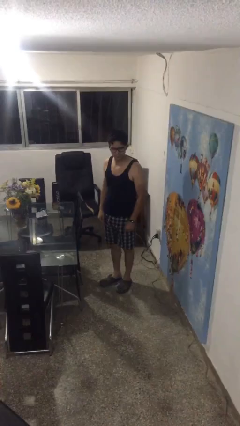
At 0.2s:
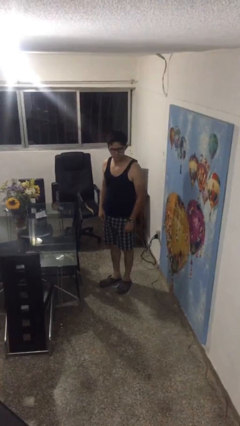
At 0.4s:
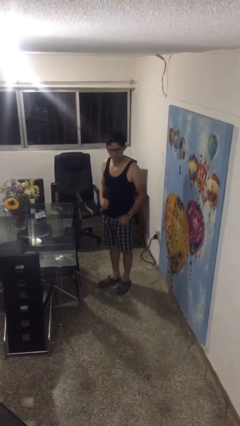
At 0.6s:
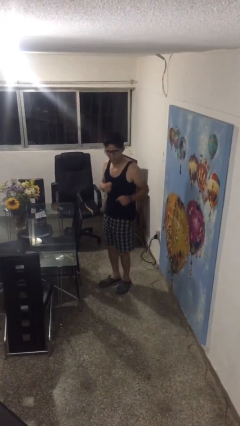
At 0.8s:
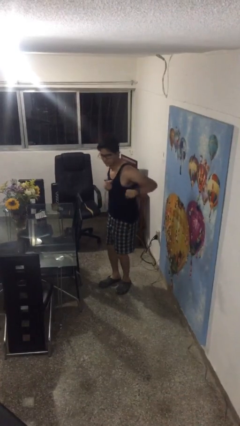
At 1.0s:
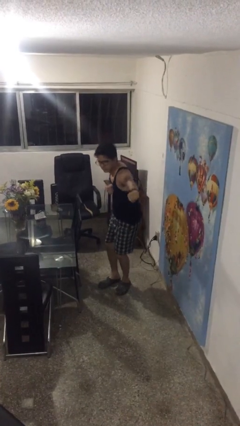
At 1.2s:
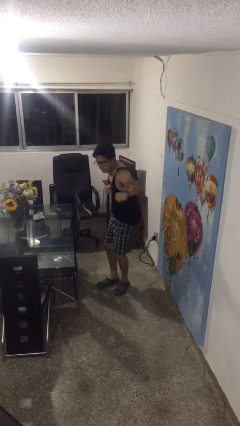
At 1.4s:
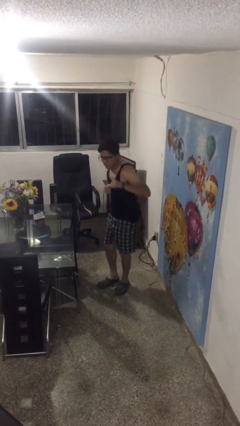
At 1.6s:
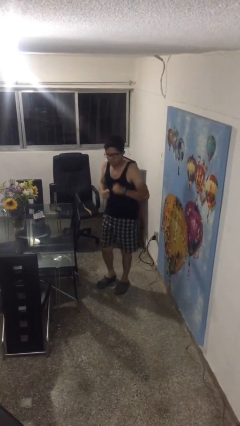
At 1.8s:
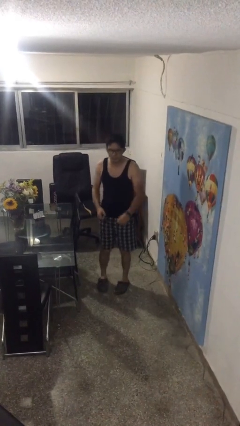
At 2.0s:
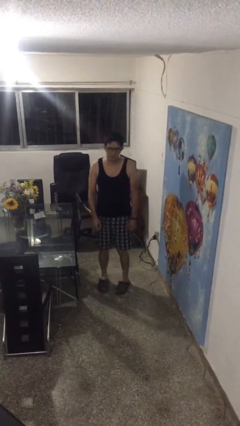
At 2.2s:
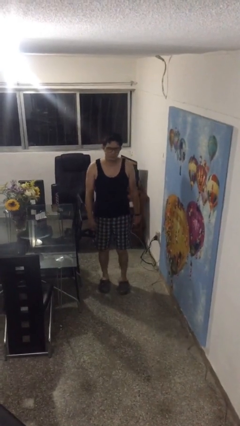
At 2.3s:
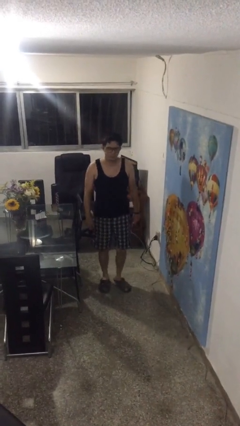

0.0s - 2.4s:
person karate chop

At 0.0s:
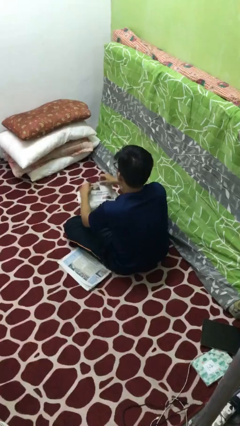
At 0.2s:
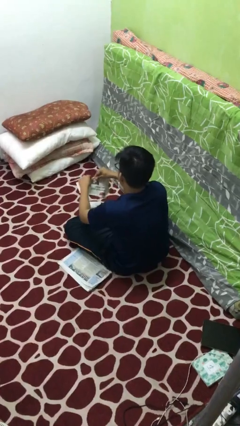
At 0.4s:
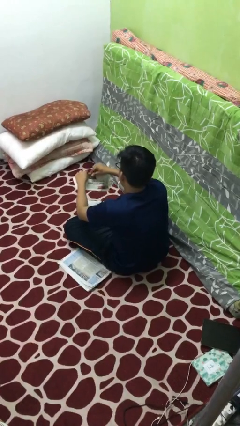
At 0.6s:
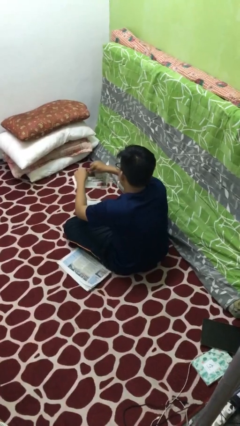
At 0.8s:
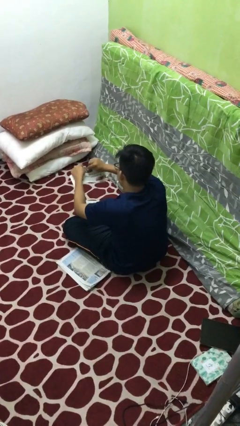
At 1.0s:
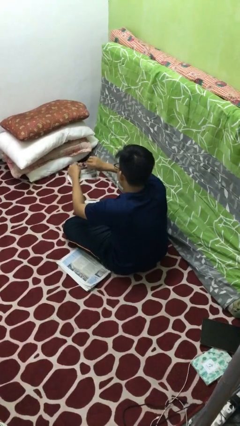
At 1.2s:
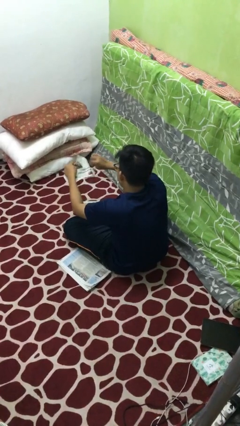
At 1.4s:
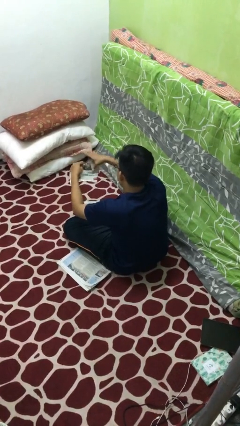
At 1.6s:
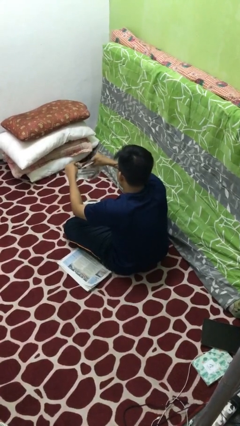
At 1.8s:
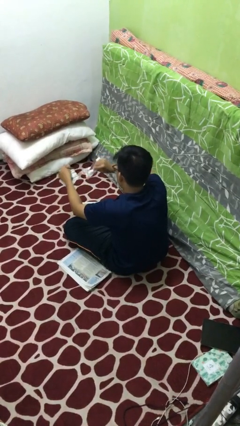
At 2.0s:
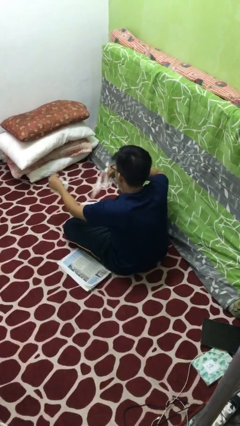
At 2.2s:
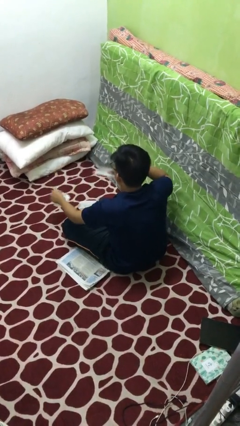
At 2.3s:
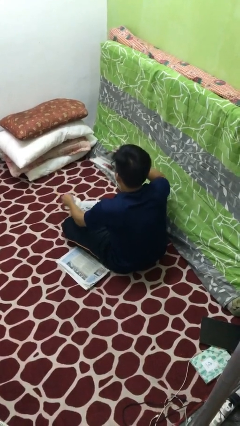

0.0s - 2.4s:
person tears paper

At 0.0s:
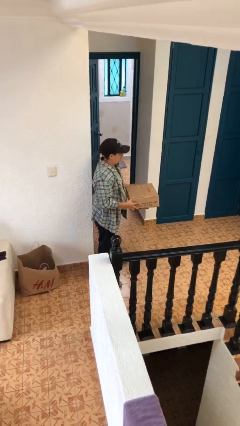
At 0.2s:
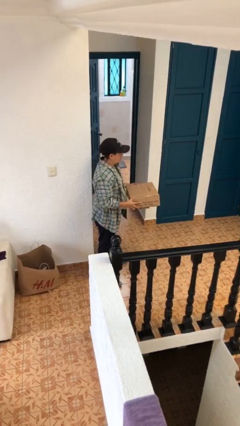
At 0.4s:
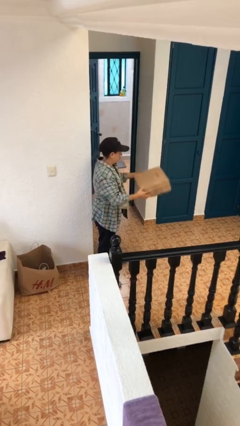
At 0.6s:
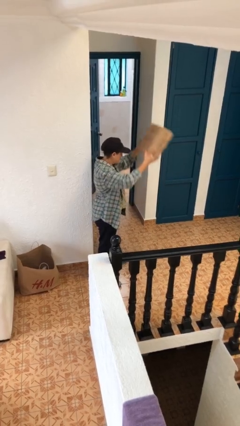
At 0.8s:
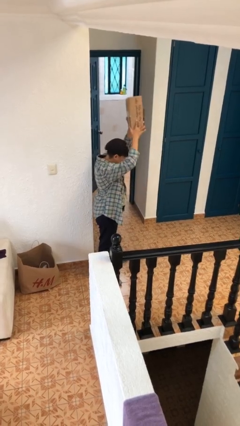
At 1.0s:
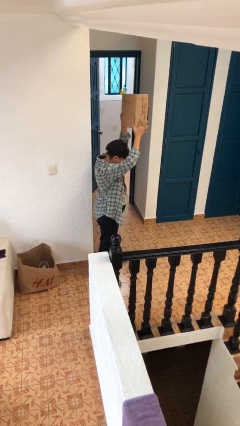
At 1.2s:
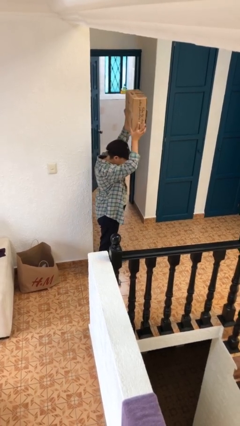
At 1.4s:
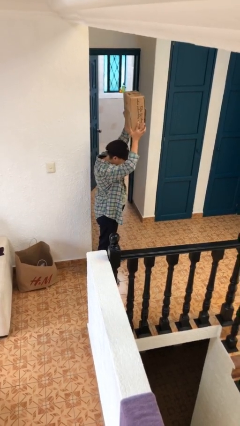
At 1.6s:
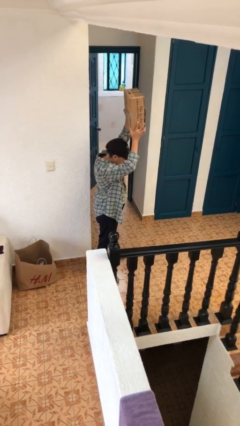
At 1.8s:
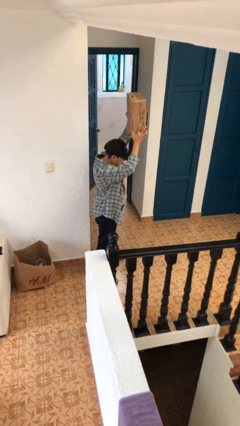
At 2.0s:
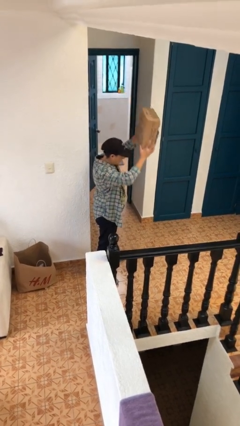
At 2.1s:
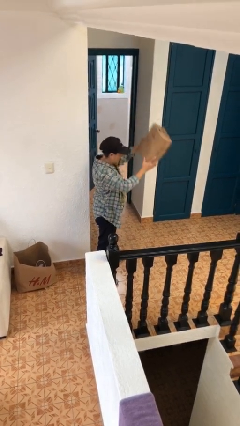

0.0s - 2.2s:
person holds object above head

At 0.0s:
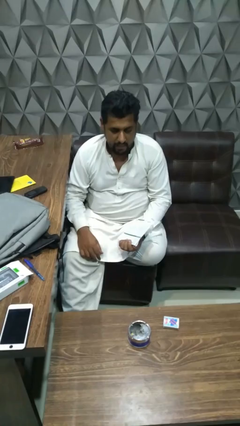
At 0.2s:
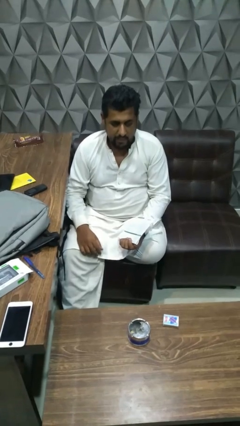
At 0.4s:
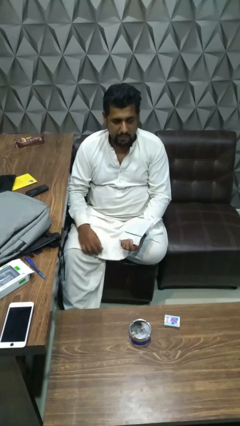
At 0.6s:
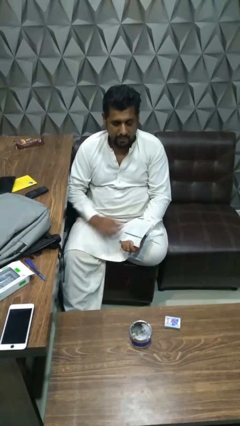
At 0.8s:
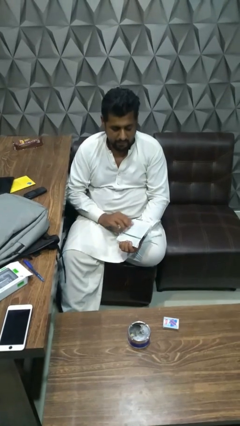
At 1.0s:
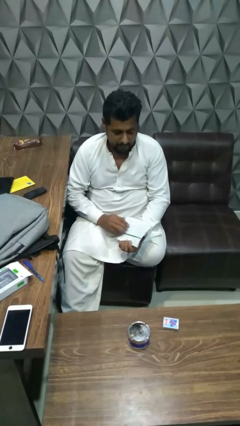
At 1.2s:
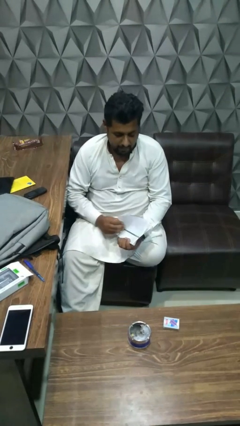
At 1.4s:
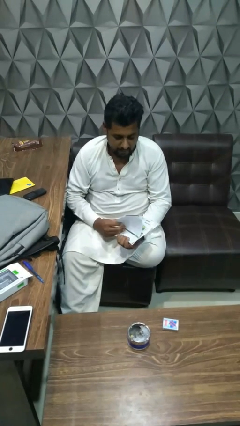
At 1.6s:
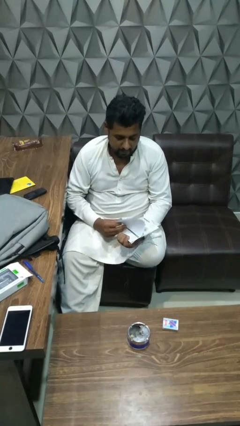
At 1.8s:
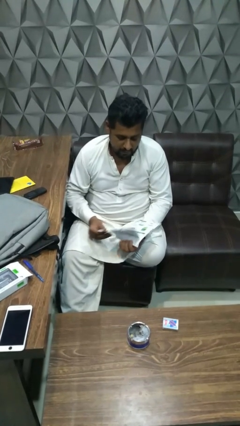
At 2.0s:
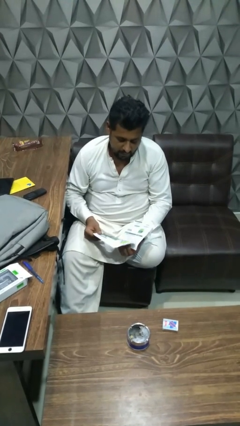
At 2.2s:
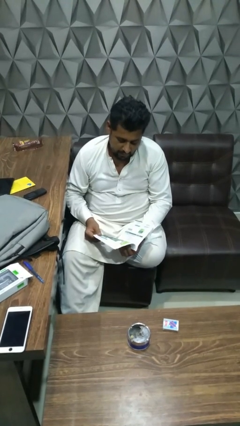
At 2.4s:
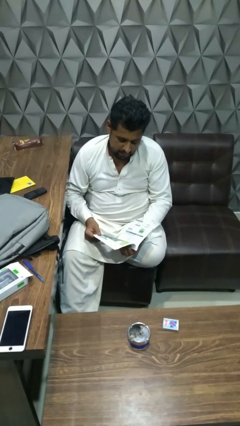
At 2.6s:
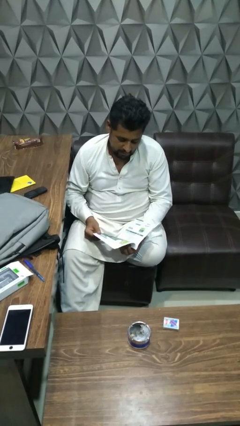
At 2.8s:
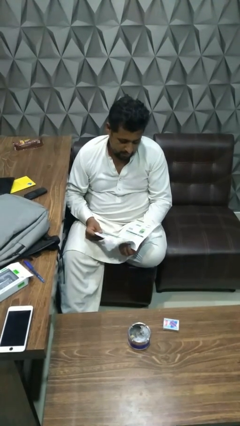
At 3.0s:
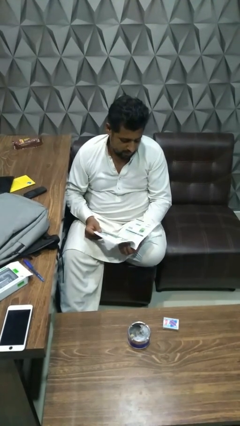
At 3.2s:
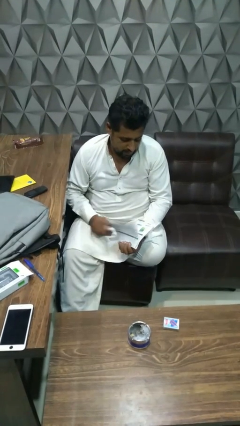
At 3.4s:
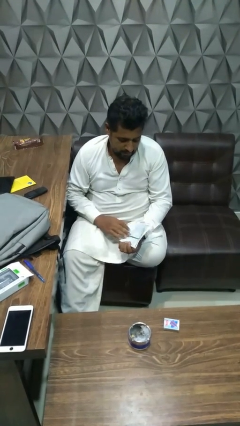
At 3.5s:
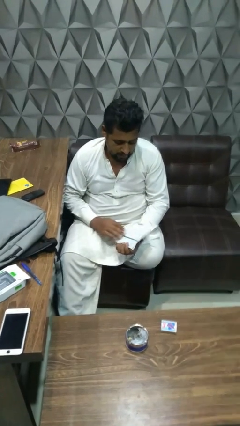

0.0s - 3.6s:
person reads book

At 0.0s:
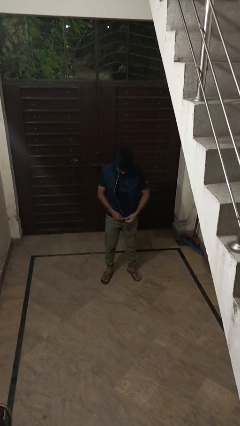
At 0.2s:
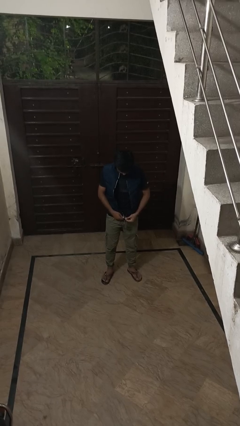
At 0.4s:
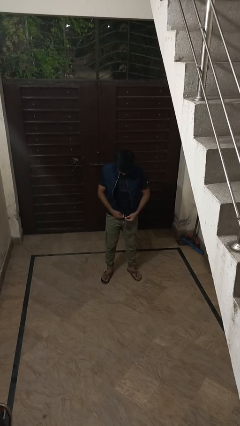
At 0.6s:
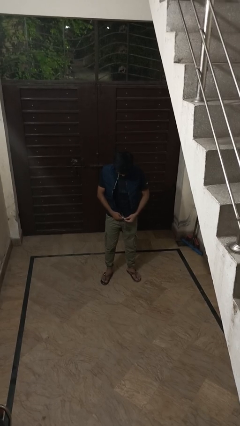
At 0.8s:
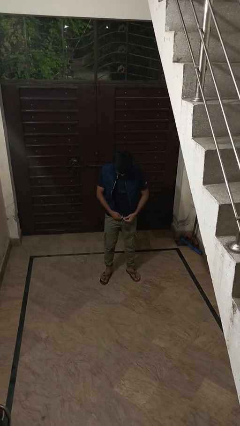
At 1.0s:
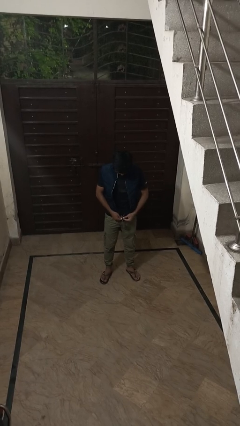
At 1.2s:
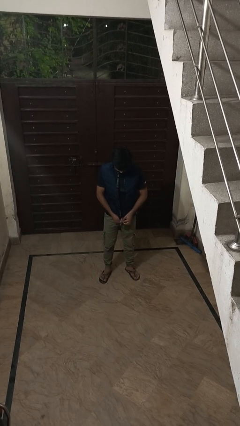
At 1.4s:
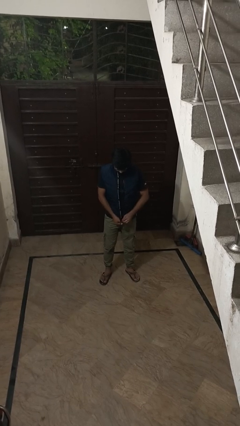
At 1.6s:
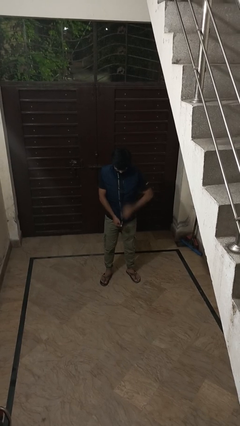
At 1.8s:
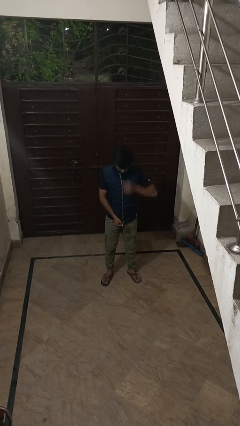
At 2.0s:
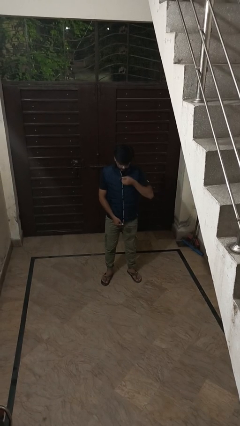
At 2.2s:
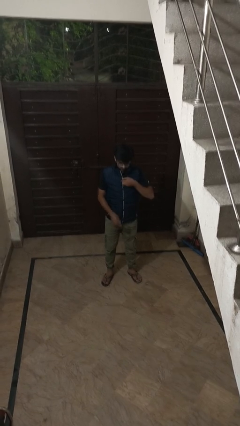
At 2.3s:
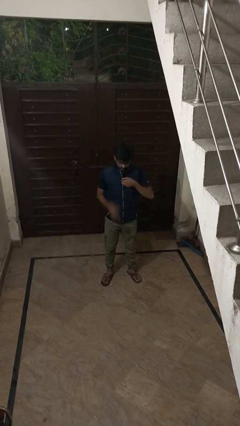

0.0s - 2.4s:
person zips up jacket

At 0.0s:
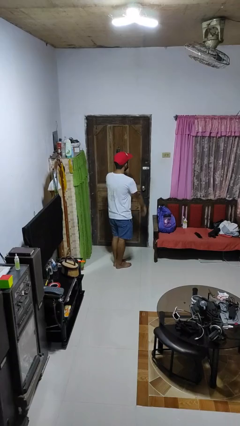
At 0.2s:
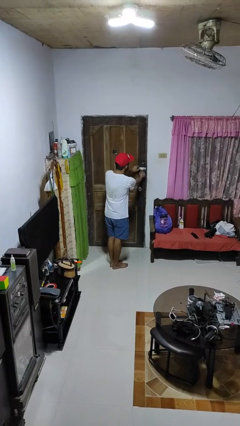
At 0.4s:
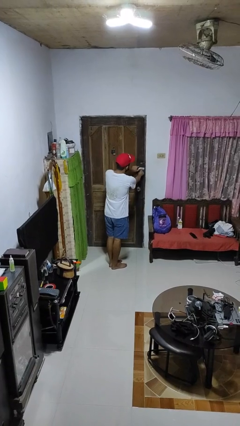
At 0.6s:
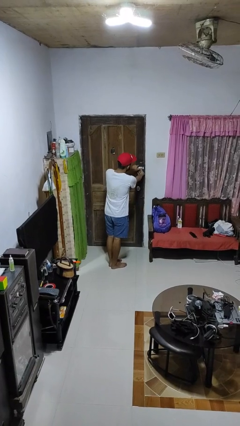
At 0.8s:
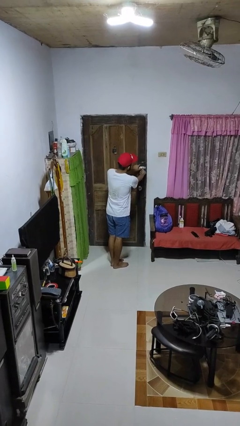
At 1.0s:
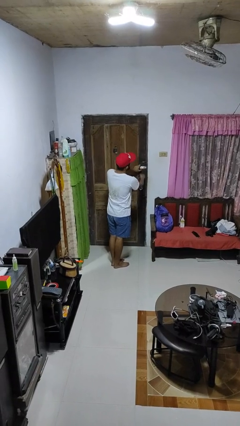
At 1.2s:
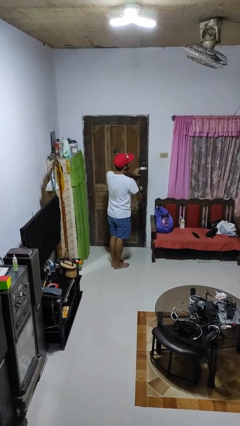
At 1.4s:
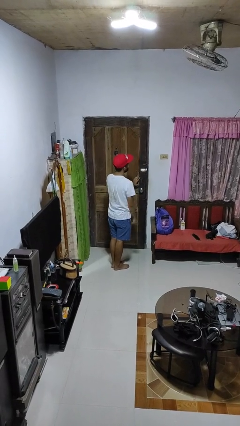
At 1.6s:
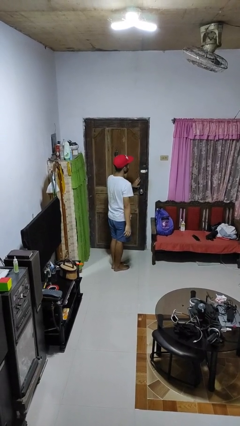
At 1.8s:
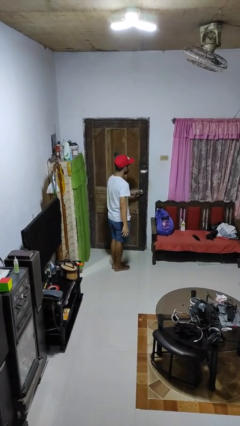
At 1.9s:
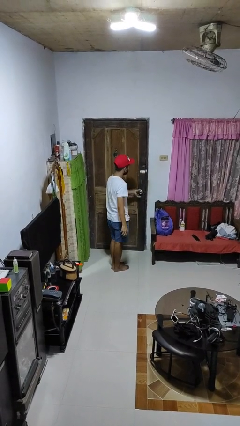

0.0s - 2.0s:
person unlocks door with keys

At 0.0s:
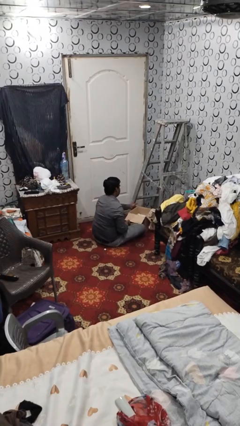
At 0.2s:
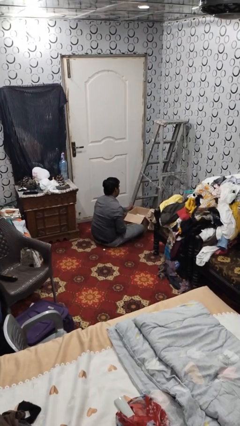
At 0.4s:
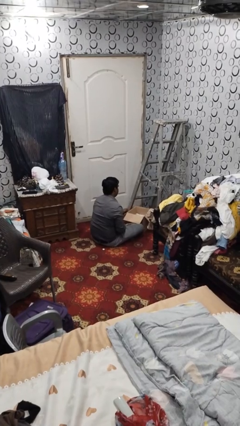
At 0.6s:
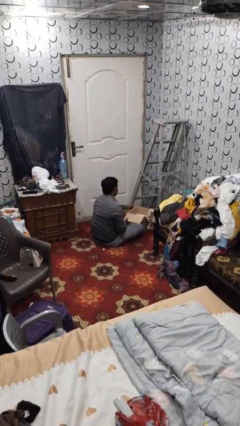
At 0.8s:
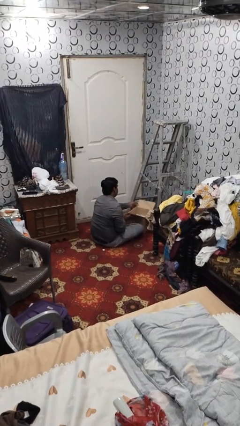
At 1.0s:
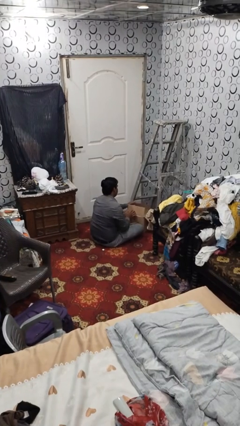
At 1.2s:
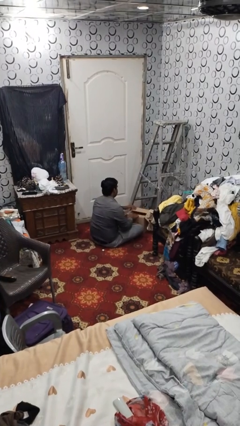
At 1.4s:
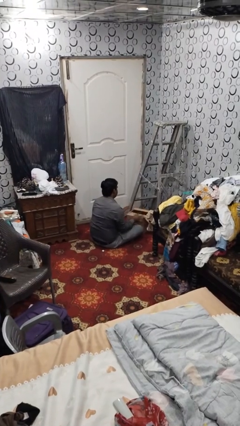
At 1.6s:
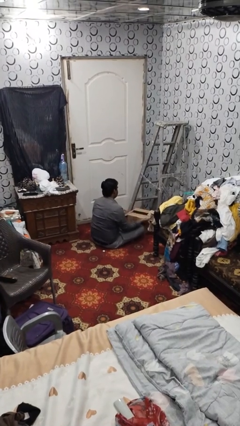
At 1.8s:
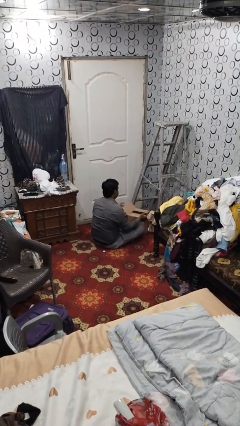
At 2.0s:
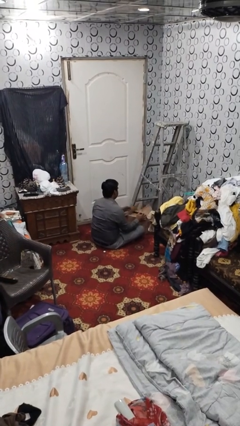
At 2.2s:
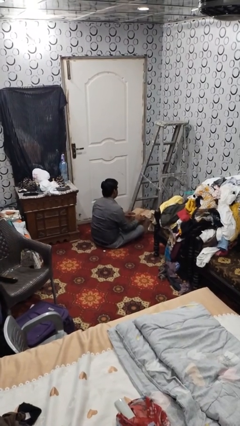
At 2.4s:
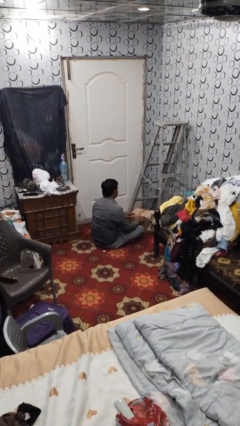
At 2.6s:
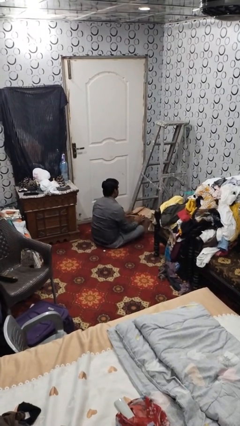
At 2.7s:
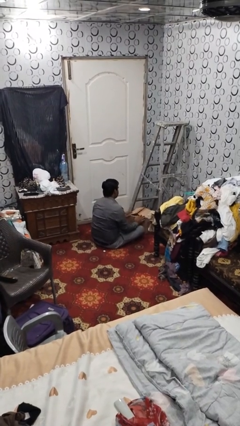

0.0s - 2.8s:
person closes box
